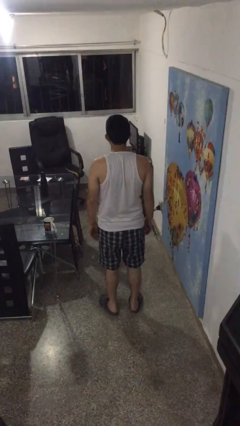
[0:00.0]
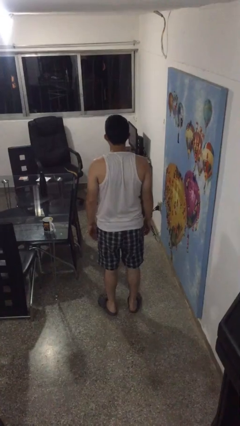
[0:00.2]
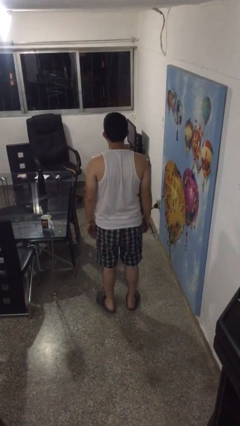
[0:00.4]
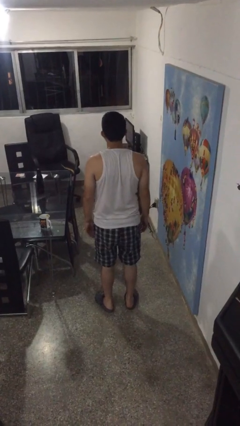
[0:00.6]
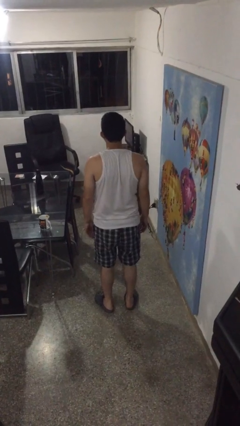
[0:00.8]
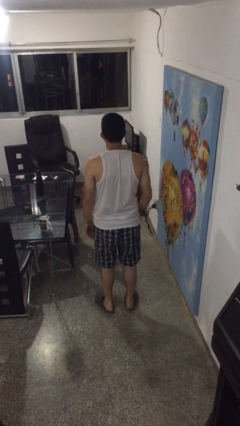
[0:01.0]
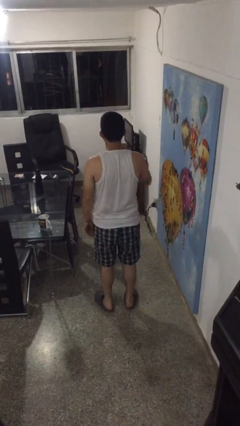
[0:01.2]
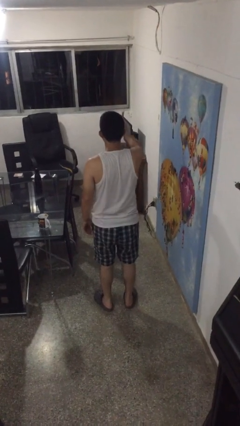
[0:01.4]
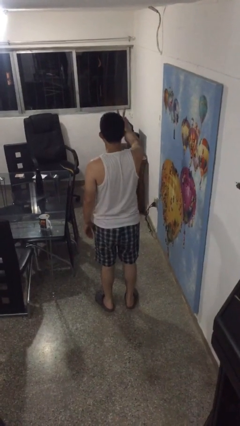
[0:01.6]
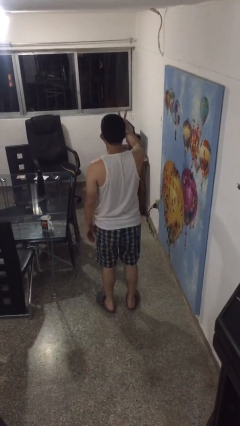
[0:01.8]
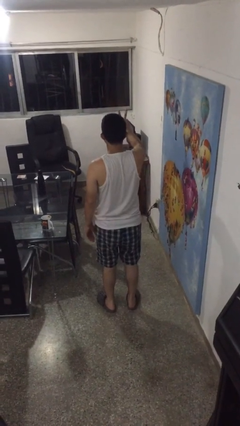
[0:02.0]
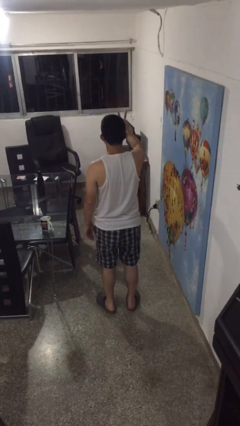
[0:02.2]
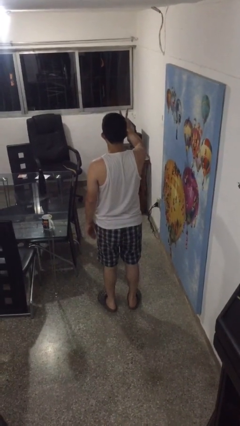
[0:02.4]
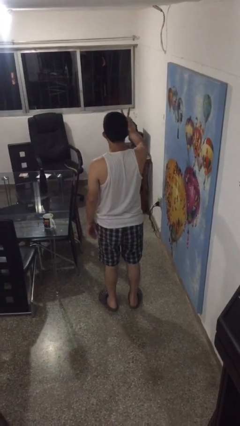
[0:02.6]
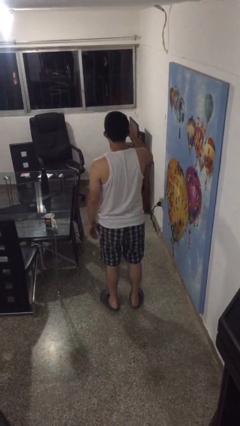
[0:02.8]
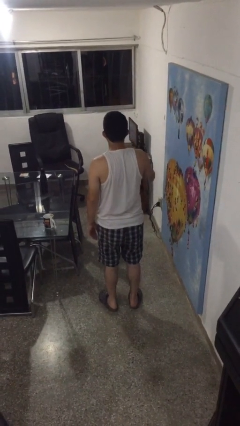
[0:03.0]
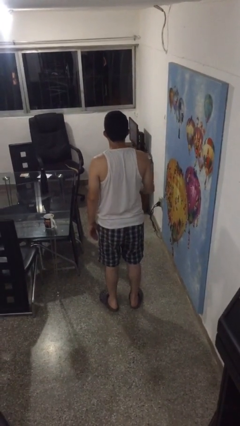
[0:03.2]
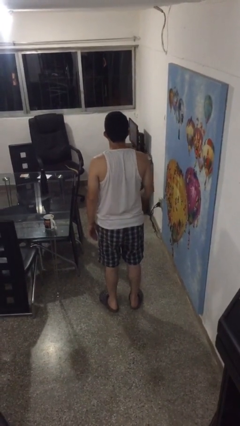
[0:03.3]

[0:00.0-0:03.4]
person gestures peace

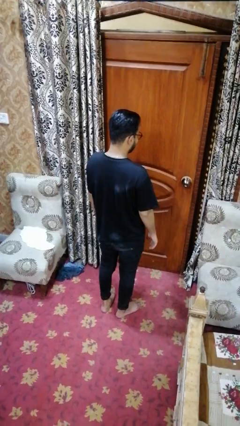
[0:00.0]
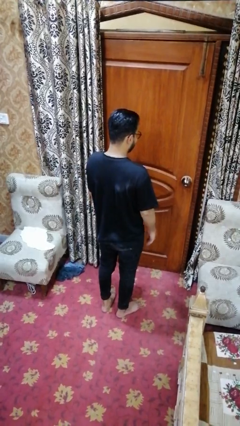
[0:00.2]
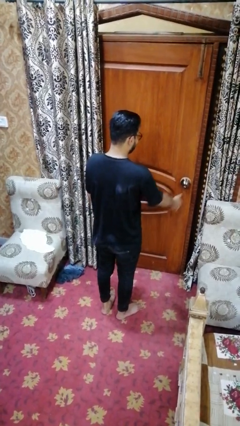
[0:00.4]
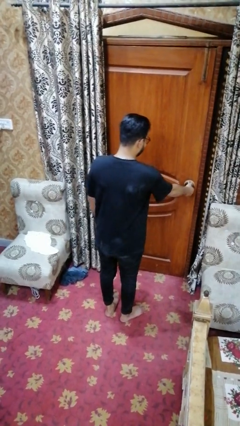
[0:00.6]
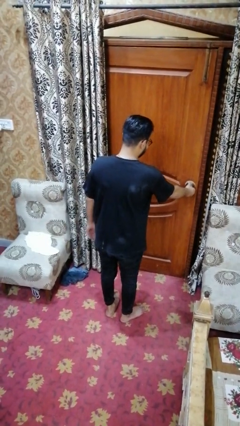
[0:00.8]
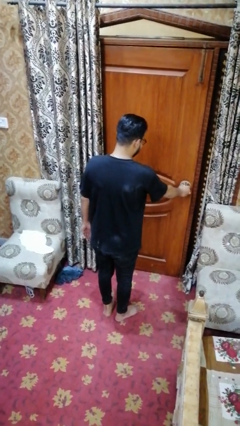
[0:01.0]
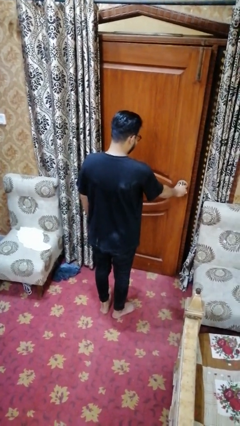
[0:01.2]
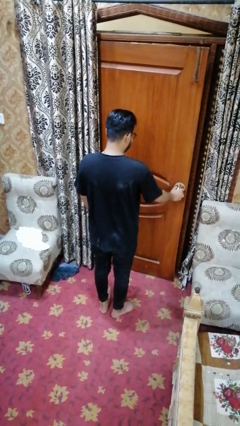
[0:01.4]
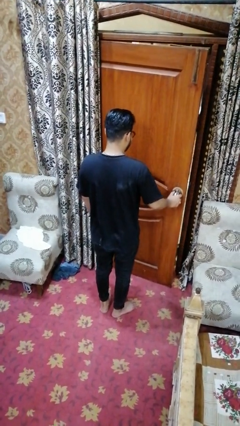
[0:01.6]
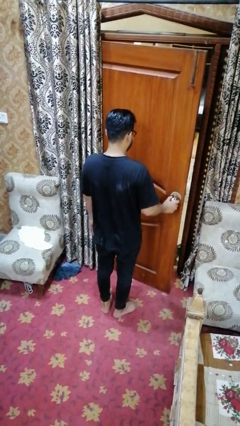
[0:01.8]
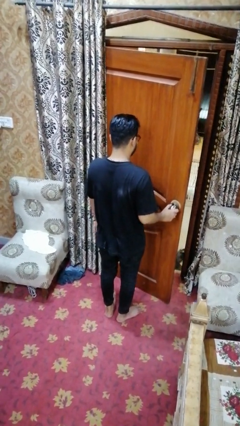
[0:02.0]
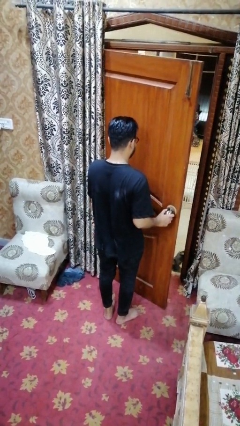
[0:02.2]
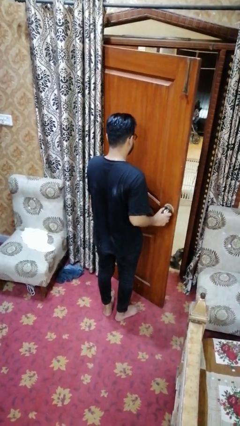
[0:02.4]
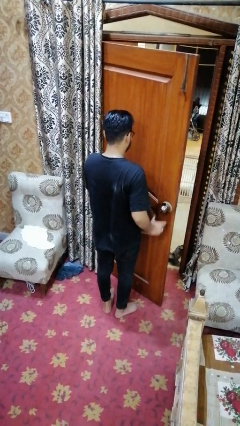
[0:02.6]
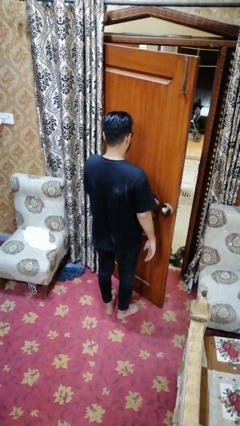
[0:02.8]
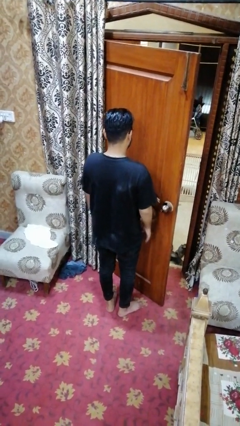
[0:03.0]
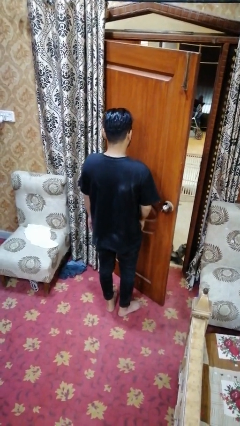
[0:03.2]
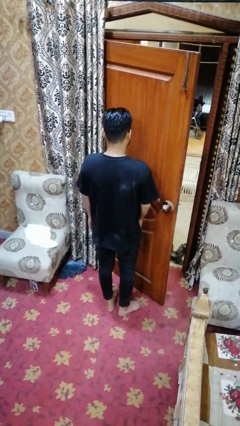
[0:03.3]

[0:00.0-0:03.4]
person opens facility door

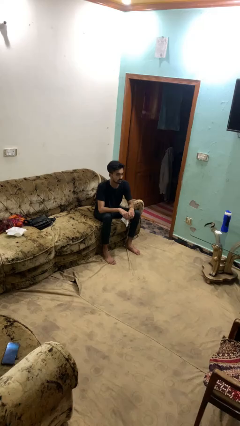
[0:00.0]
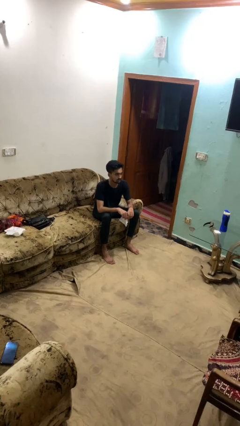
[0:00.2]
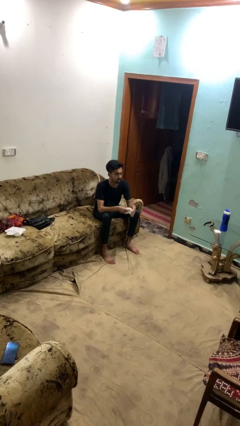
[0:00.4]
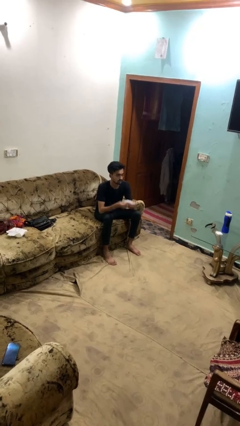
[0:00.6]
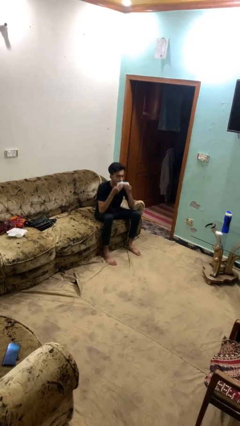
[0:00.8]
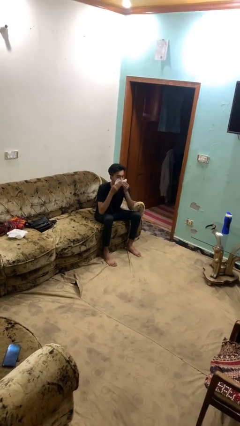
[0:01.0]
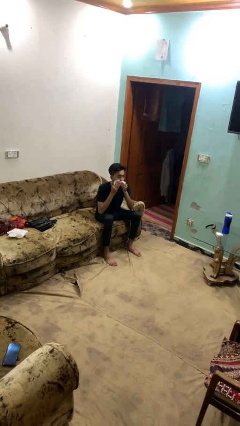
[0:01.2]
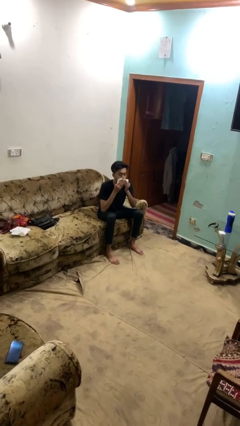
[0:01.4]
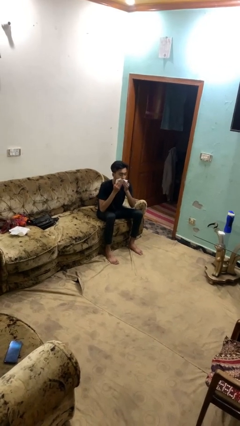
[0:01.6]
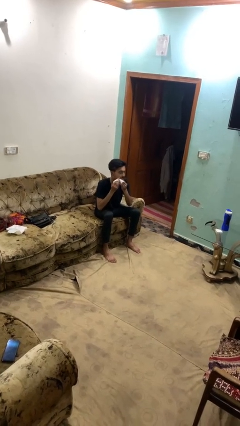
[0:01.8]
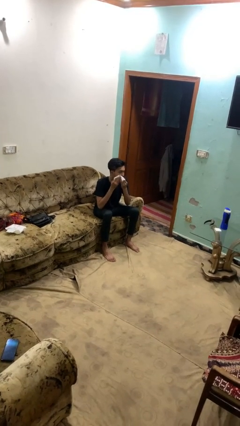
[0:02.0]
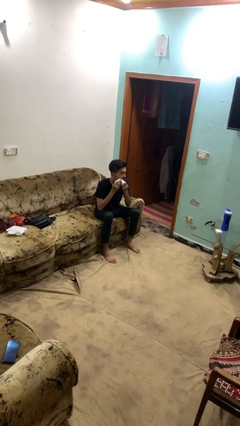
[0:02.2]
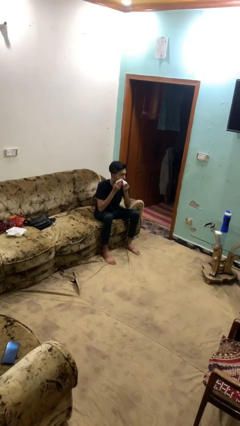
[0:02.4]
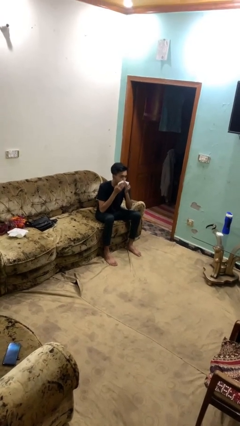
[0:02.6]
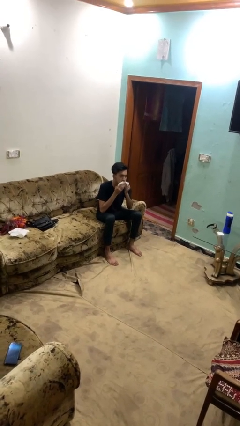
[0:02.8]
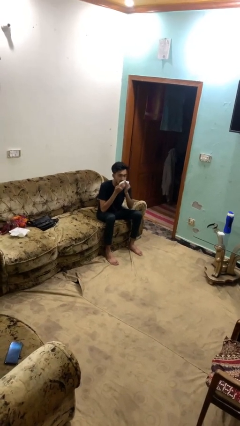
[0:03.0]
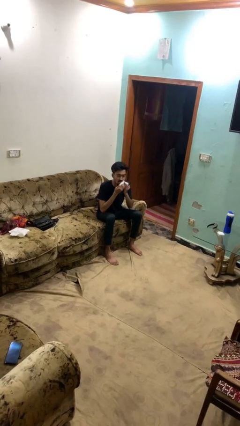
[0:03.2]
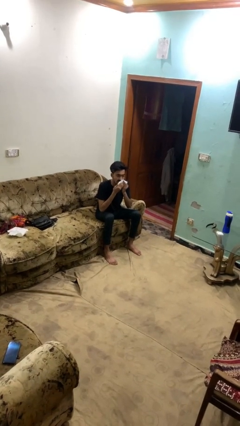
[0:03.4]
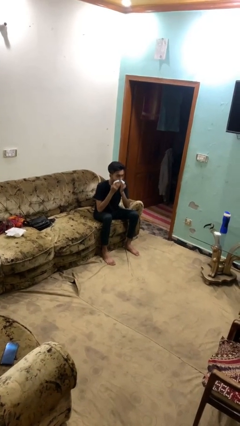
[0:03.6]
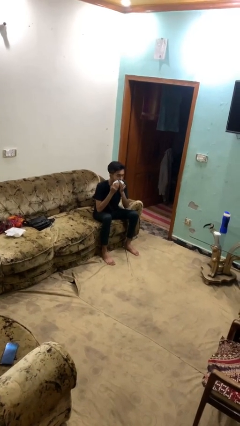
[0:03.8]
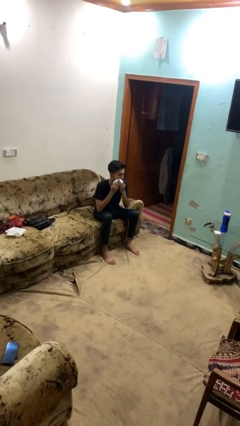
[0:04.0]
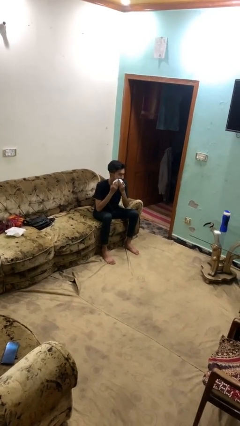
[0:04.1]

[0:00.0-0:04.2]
person wipes mouth with napkin

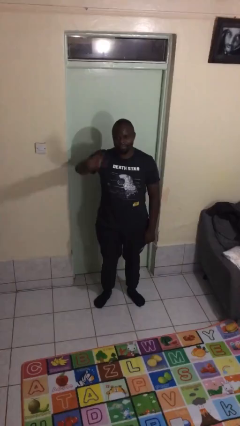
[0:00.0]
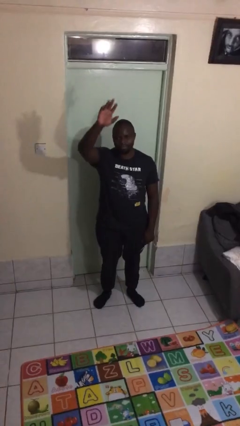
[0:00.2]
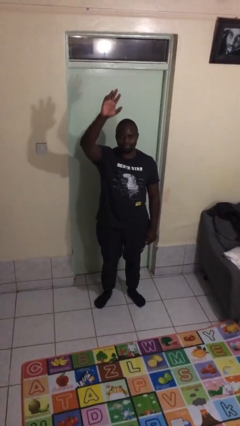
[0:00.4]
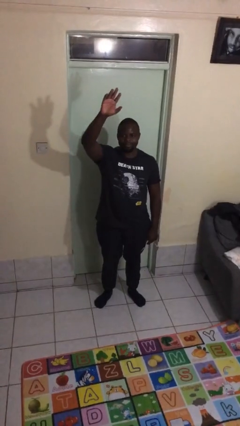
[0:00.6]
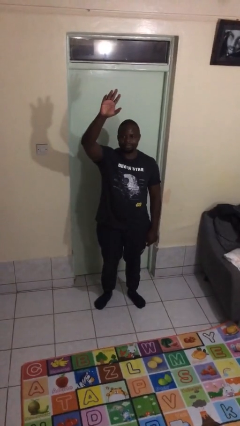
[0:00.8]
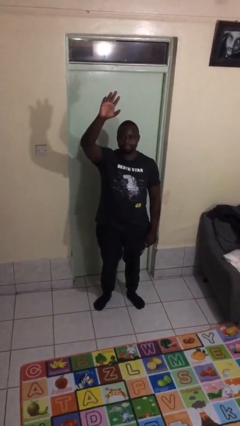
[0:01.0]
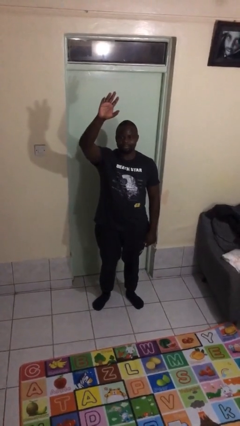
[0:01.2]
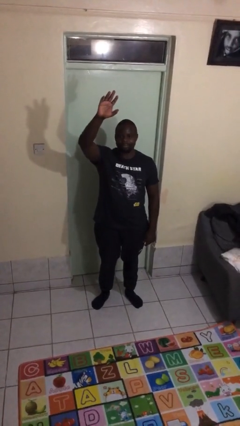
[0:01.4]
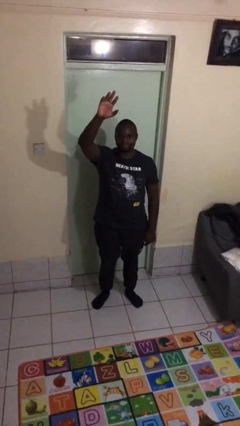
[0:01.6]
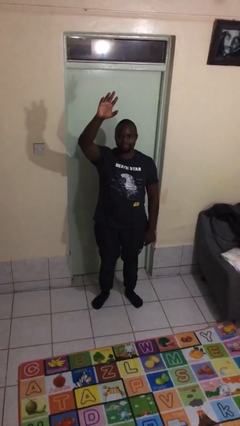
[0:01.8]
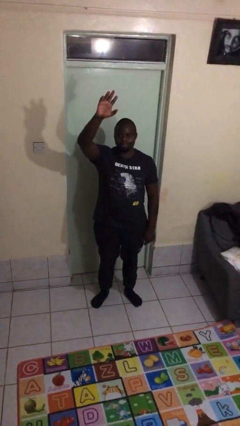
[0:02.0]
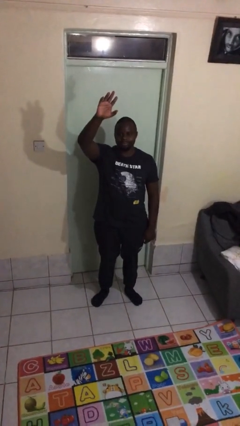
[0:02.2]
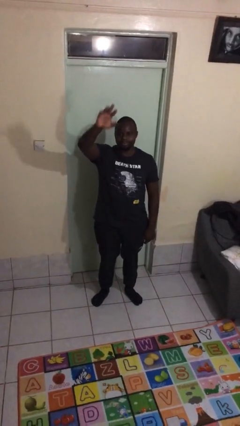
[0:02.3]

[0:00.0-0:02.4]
person gestures raise hand

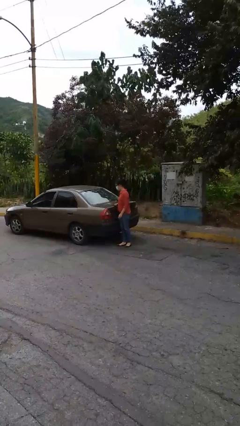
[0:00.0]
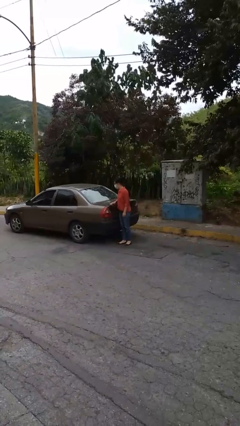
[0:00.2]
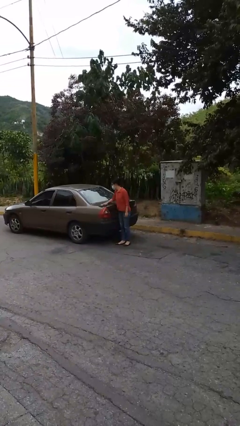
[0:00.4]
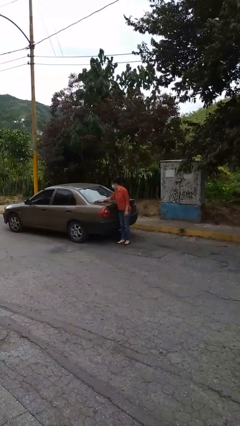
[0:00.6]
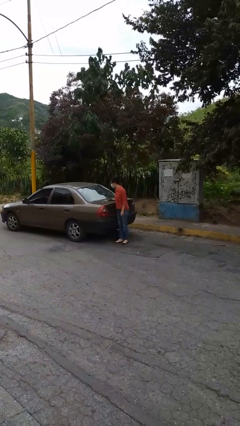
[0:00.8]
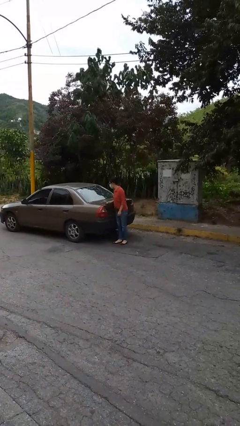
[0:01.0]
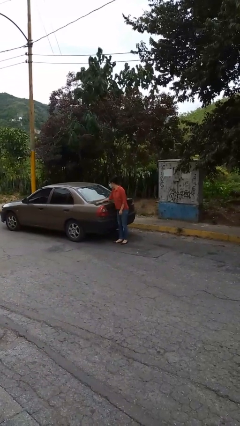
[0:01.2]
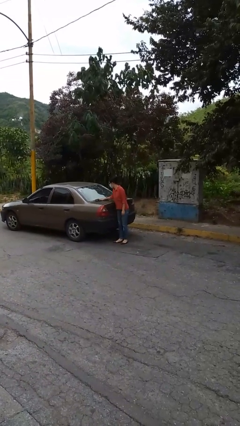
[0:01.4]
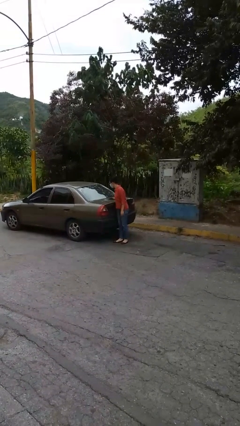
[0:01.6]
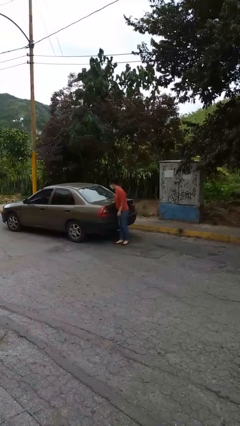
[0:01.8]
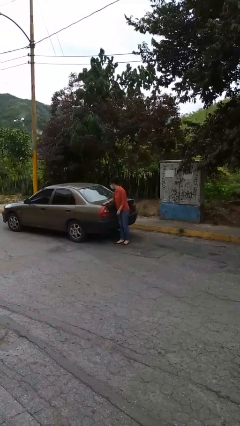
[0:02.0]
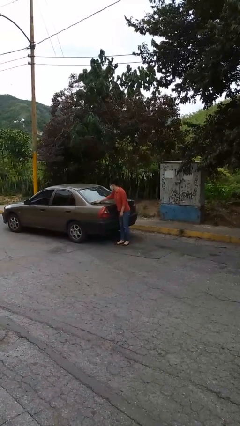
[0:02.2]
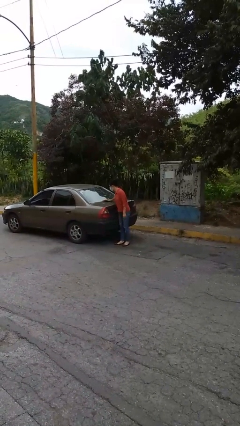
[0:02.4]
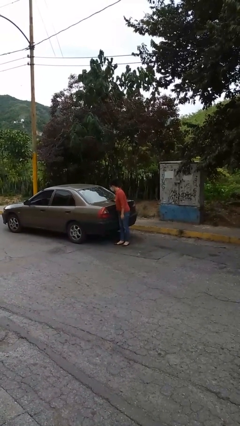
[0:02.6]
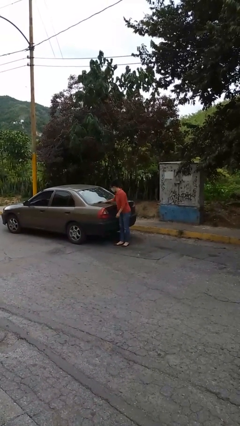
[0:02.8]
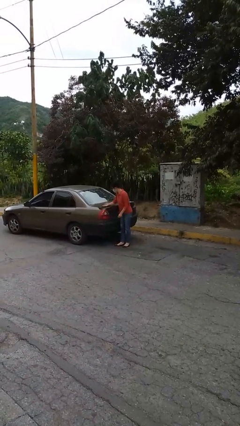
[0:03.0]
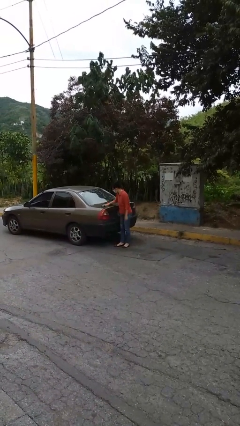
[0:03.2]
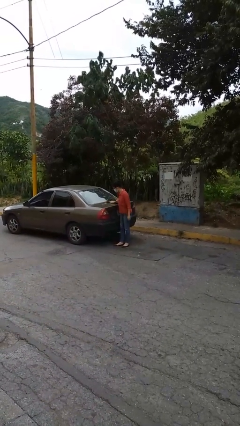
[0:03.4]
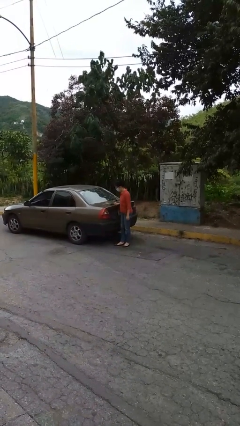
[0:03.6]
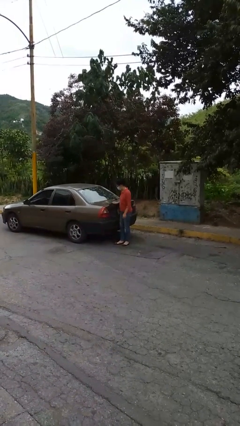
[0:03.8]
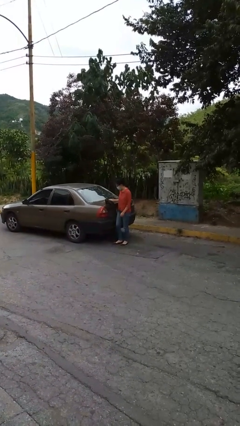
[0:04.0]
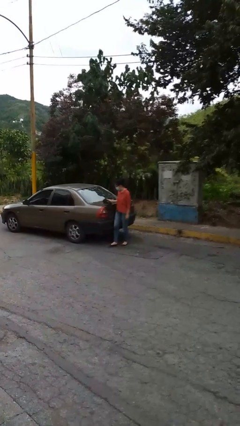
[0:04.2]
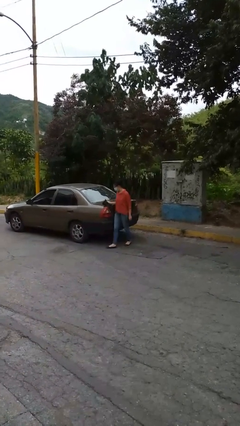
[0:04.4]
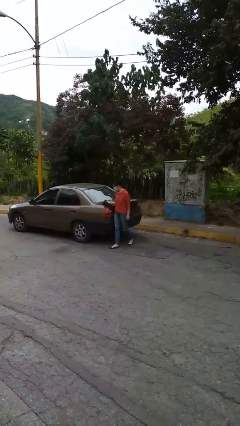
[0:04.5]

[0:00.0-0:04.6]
person polishes car with rag
